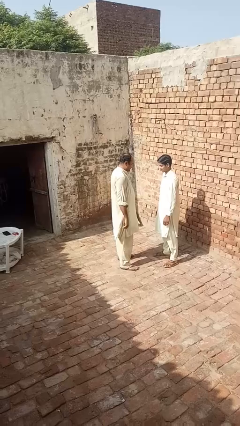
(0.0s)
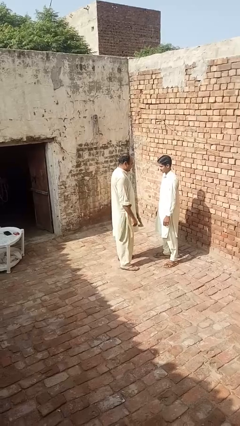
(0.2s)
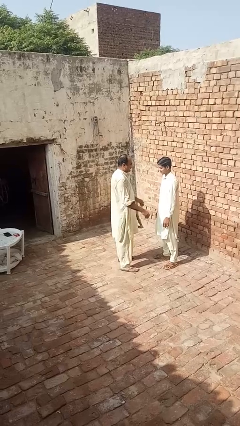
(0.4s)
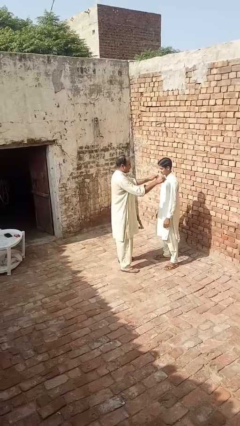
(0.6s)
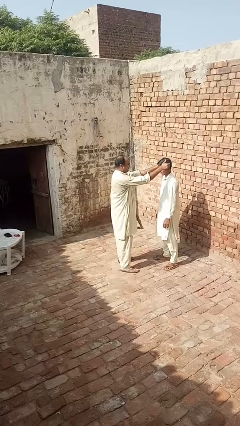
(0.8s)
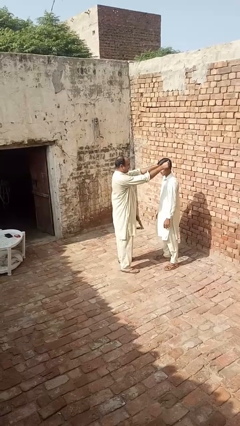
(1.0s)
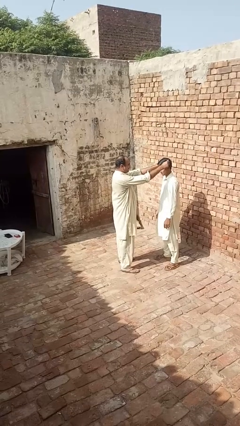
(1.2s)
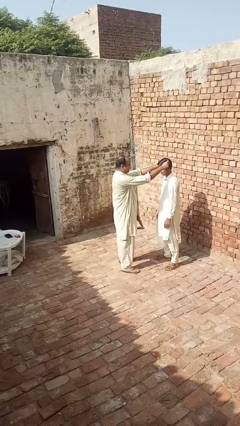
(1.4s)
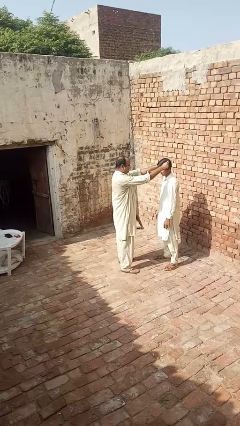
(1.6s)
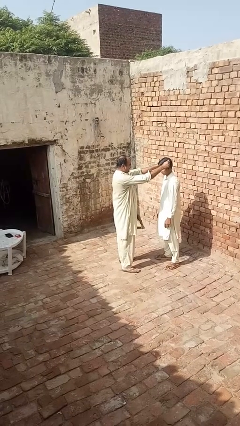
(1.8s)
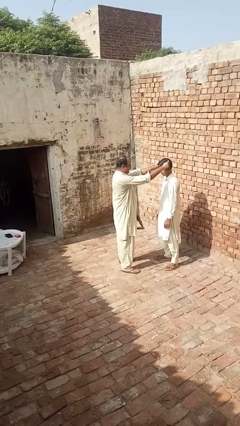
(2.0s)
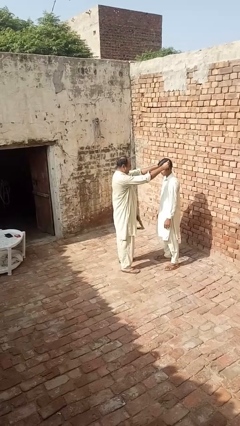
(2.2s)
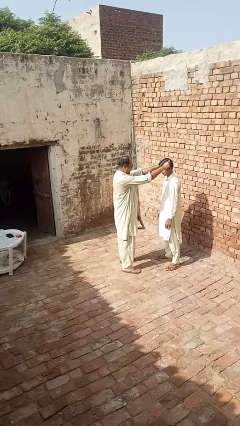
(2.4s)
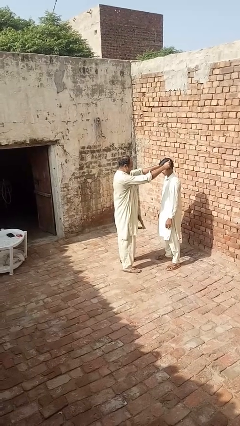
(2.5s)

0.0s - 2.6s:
person grabs person by hair

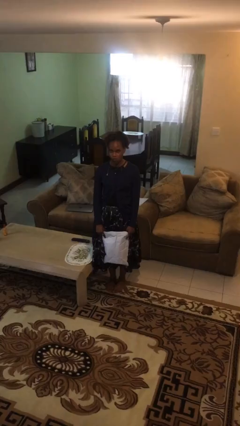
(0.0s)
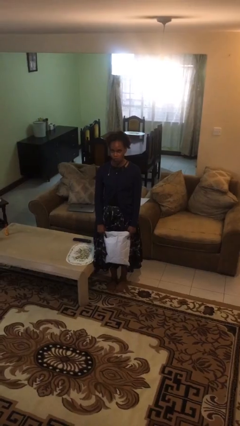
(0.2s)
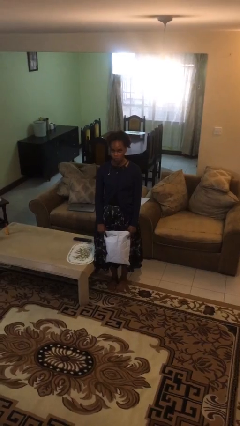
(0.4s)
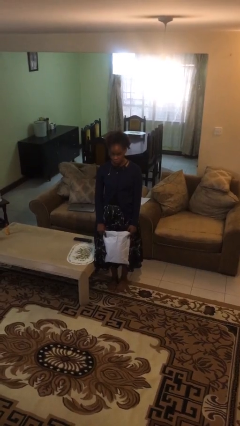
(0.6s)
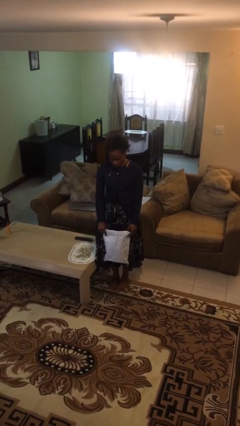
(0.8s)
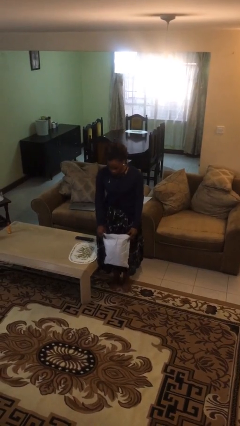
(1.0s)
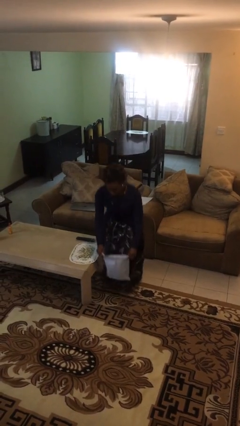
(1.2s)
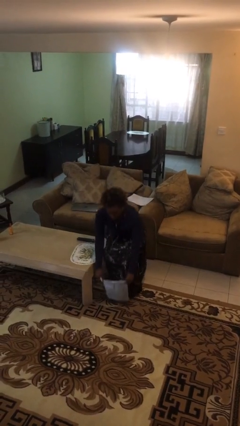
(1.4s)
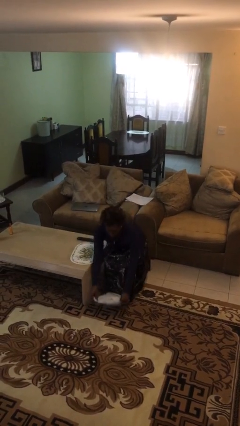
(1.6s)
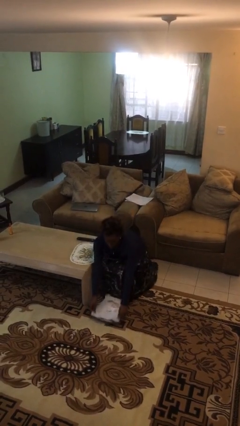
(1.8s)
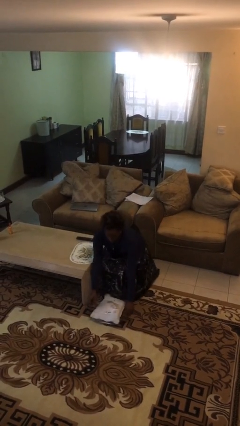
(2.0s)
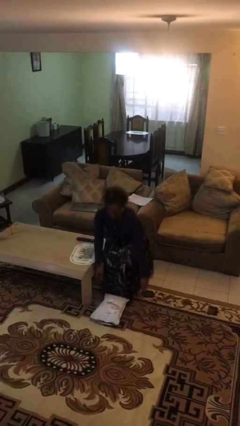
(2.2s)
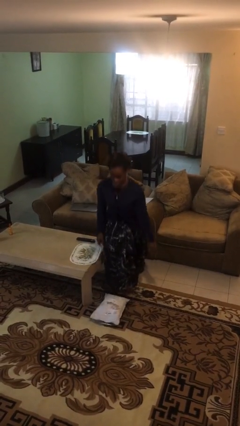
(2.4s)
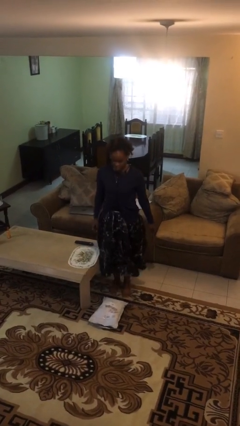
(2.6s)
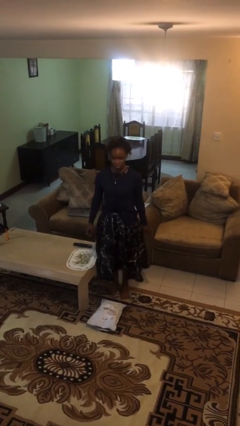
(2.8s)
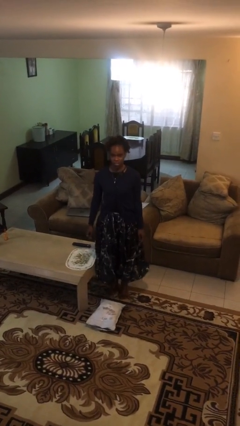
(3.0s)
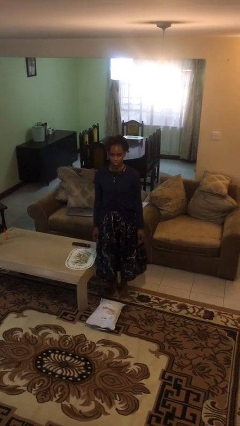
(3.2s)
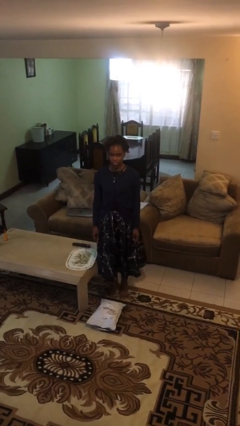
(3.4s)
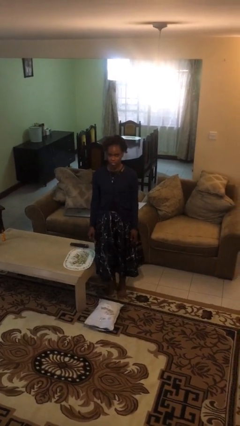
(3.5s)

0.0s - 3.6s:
person puts down object on floor

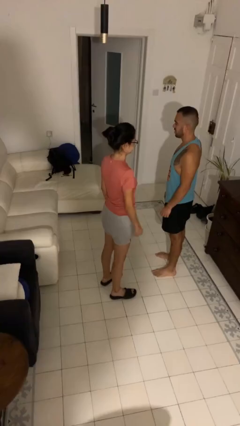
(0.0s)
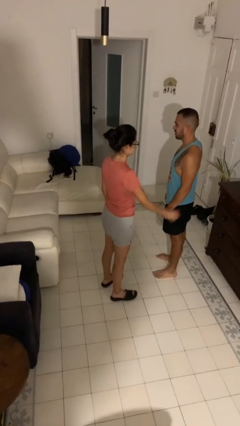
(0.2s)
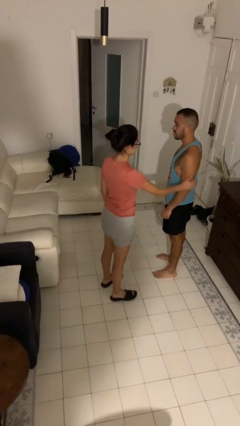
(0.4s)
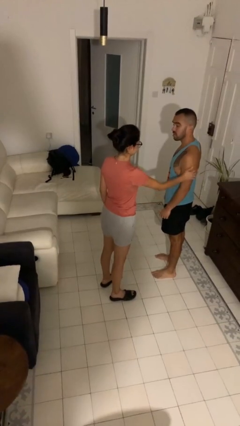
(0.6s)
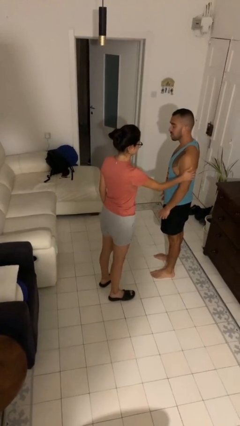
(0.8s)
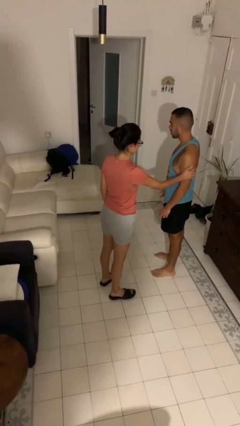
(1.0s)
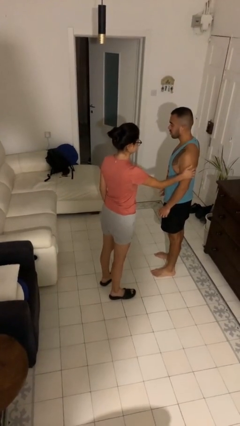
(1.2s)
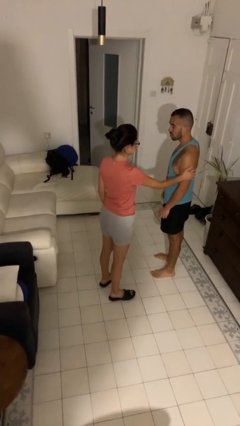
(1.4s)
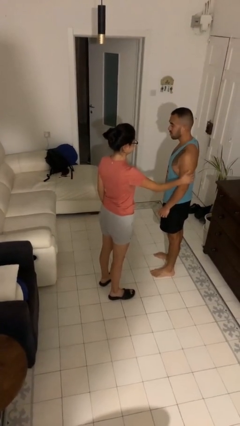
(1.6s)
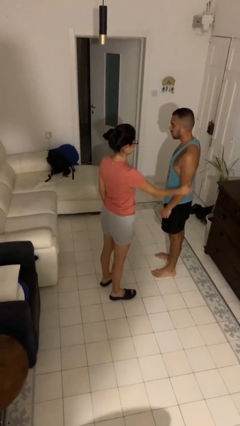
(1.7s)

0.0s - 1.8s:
person grabs person by bicep

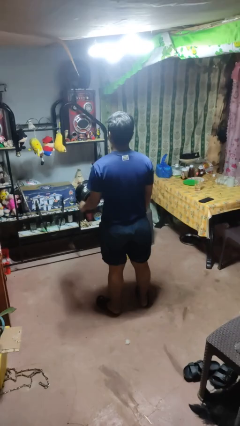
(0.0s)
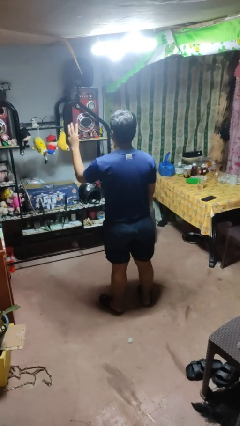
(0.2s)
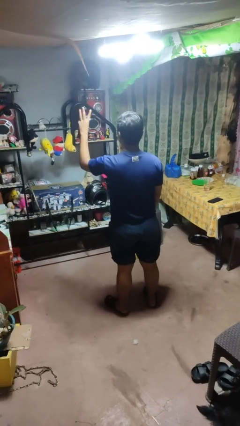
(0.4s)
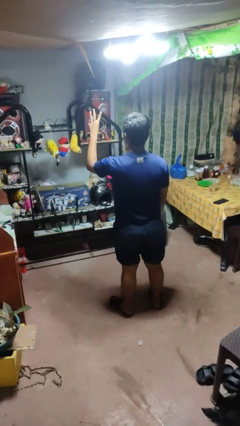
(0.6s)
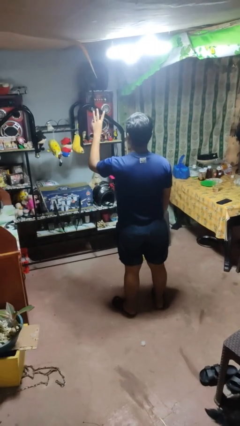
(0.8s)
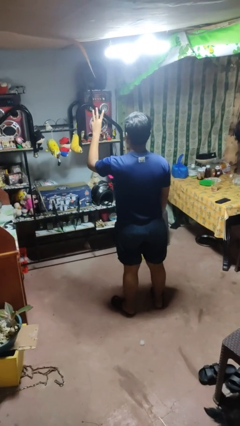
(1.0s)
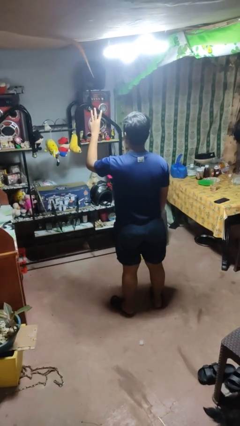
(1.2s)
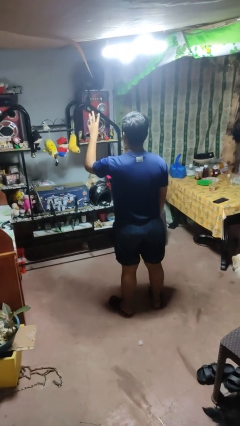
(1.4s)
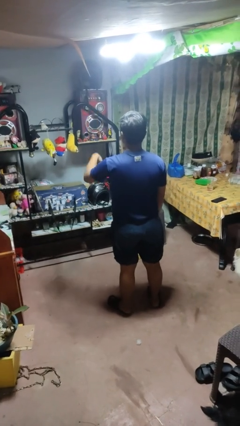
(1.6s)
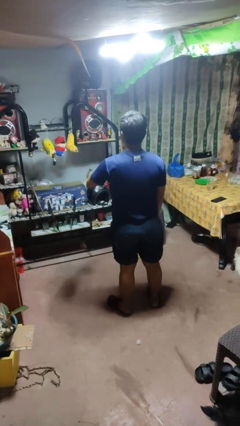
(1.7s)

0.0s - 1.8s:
person gestures number three

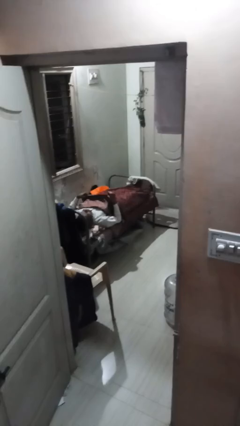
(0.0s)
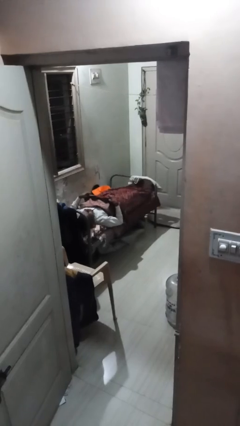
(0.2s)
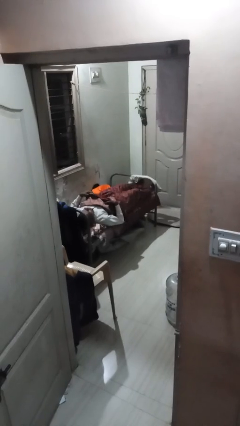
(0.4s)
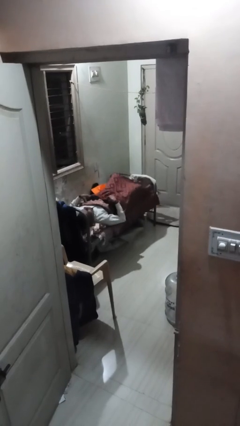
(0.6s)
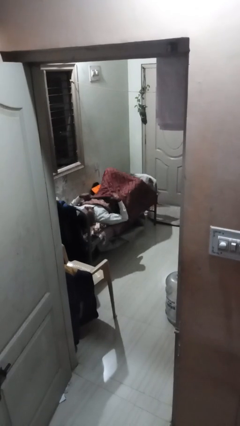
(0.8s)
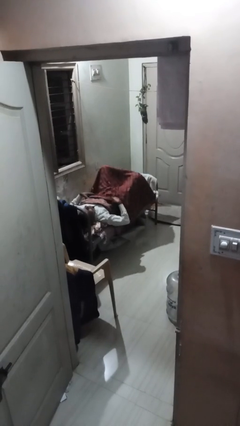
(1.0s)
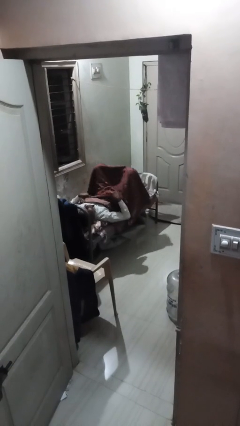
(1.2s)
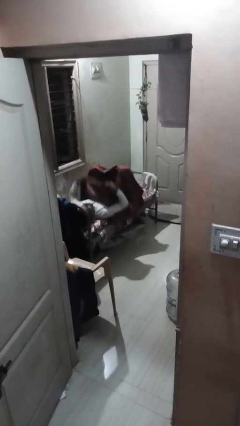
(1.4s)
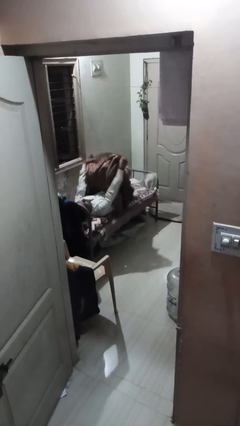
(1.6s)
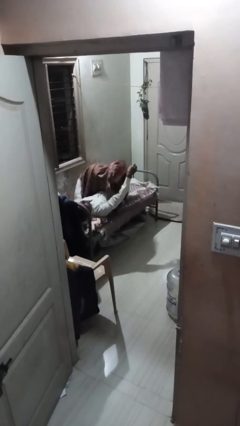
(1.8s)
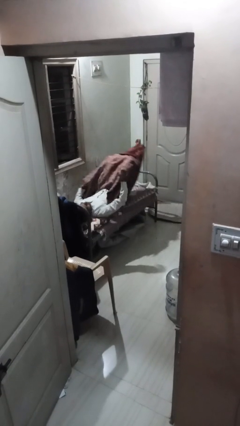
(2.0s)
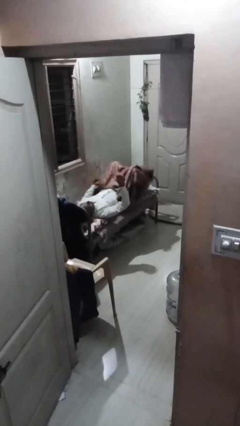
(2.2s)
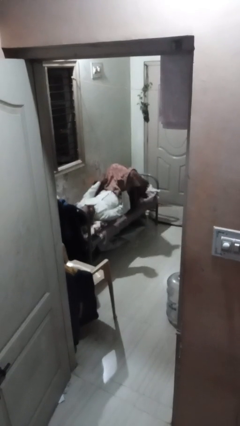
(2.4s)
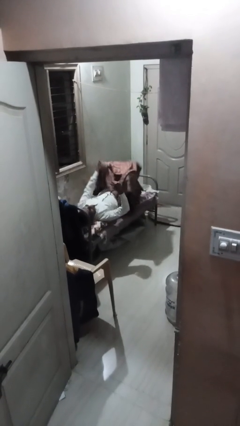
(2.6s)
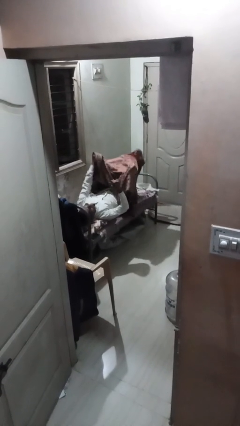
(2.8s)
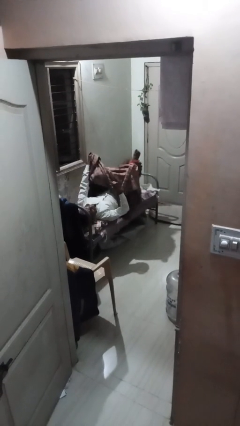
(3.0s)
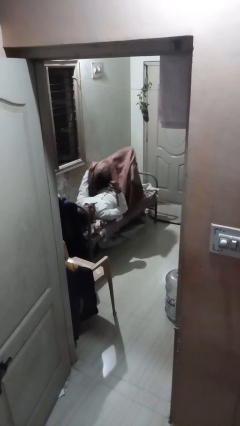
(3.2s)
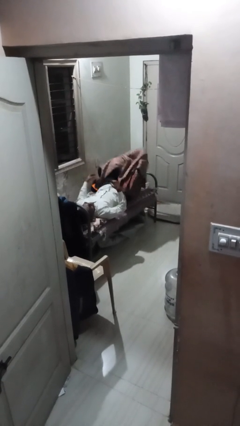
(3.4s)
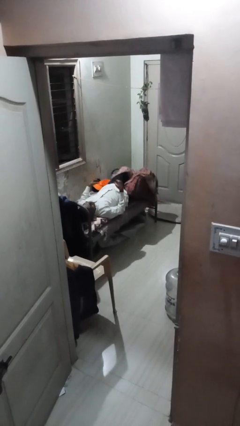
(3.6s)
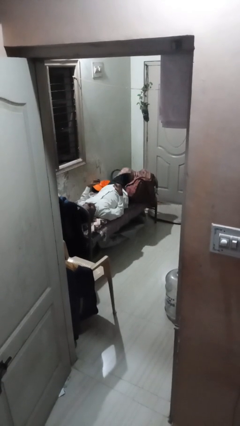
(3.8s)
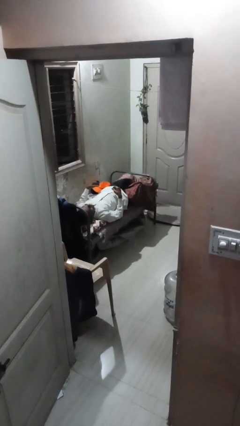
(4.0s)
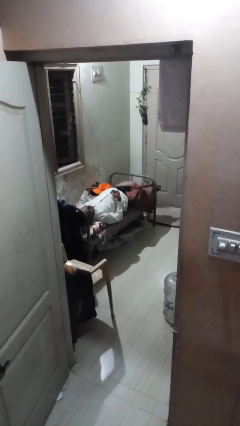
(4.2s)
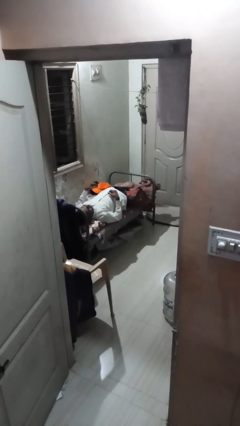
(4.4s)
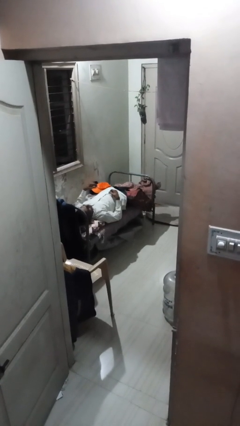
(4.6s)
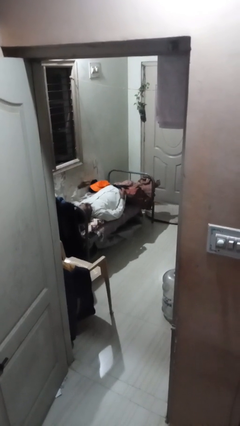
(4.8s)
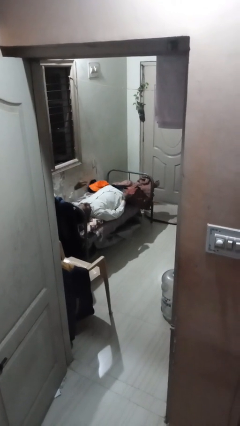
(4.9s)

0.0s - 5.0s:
person uncovers with bedsheets

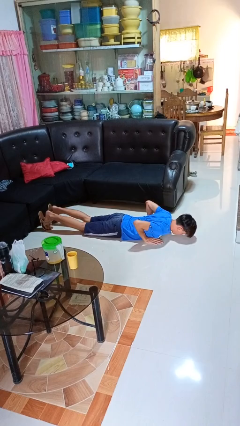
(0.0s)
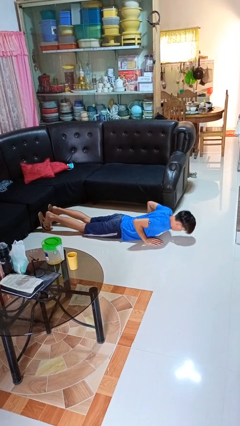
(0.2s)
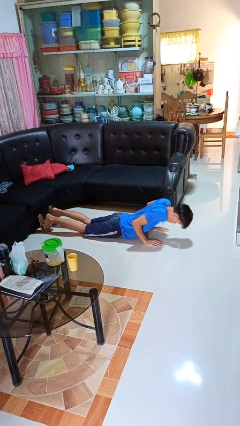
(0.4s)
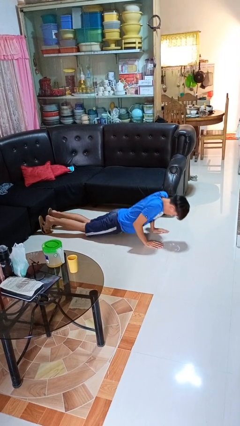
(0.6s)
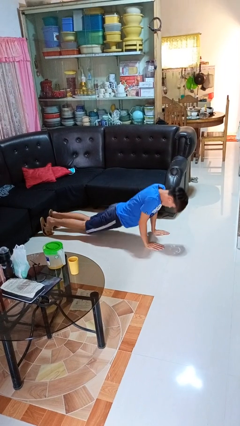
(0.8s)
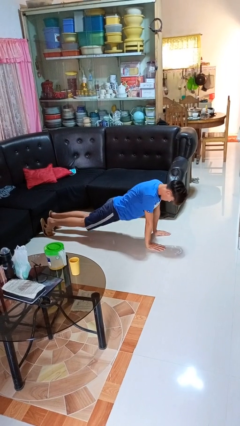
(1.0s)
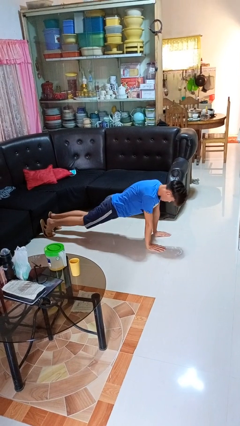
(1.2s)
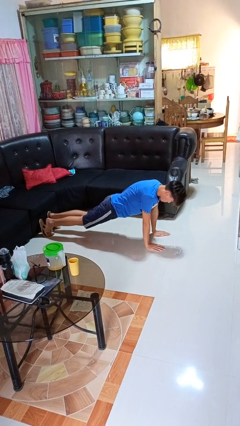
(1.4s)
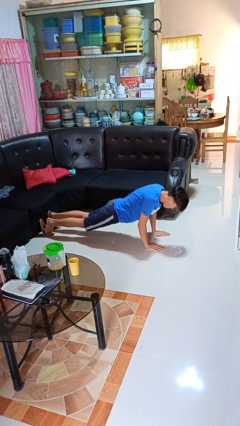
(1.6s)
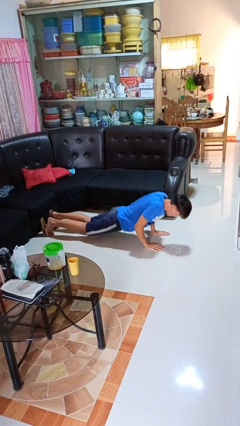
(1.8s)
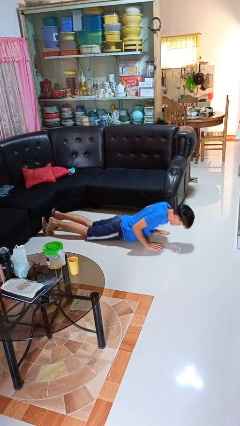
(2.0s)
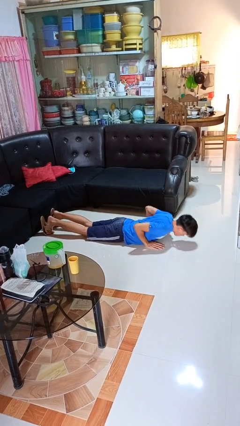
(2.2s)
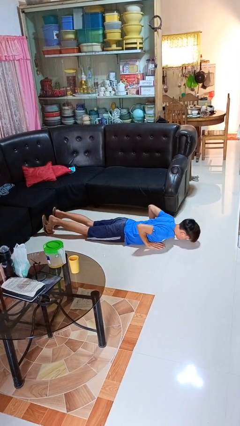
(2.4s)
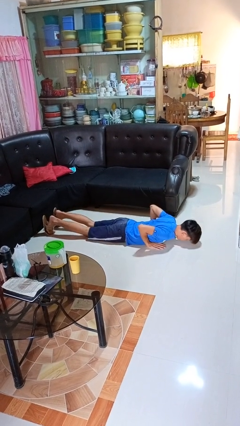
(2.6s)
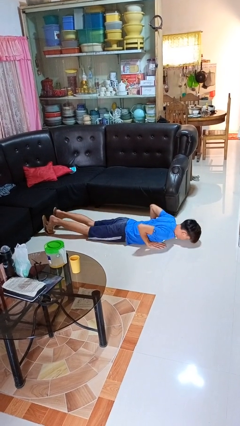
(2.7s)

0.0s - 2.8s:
person exercises with pushup
